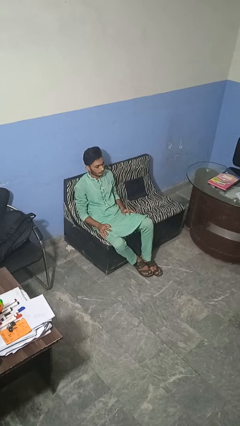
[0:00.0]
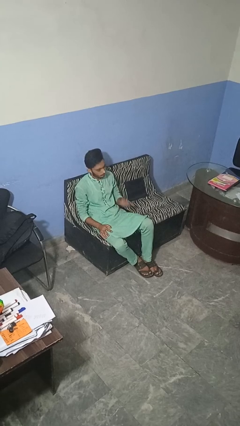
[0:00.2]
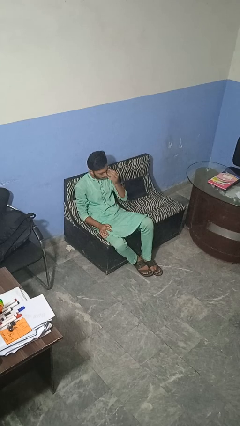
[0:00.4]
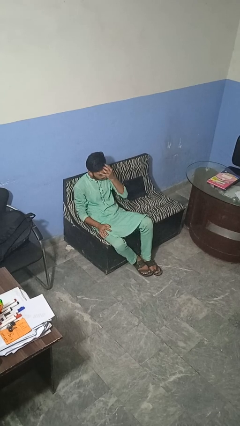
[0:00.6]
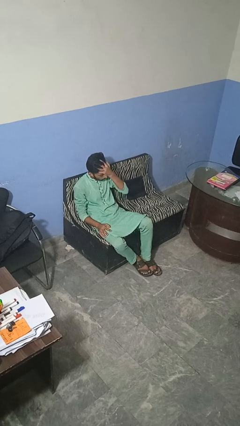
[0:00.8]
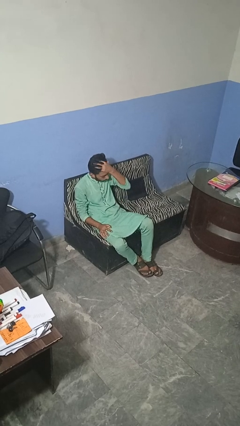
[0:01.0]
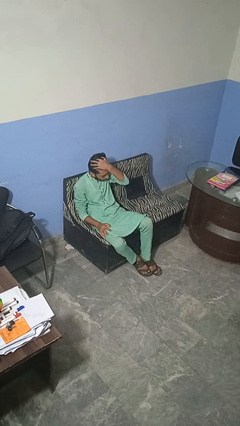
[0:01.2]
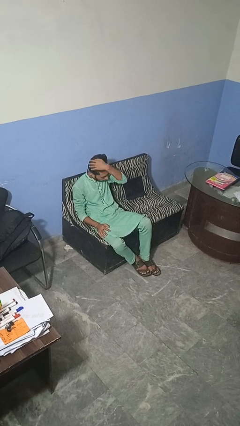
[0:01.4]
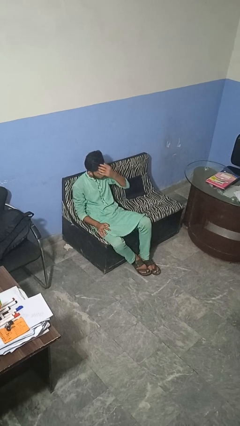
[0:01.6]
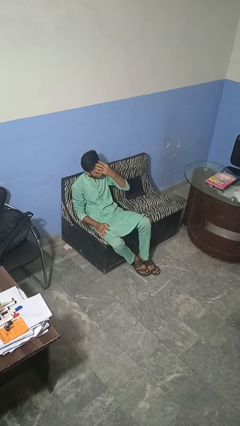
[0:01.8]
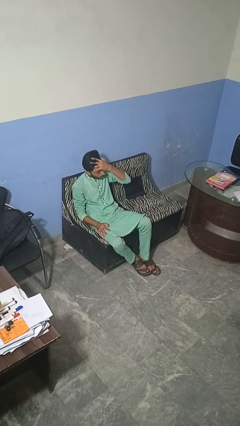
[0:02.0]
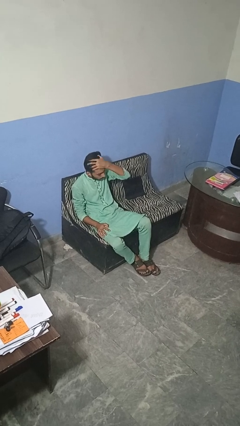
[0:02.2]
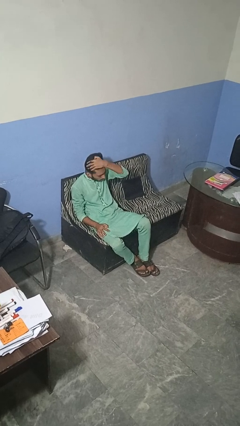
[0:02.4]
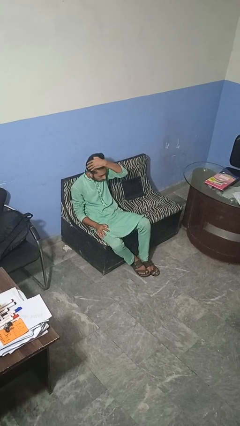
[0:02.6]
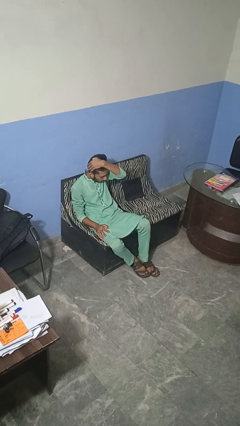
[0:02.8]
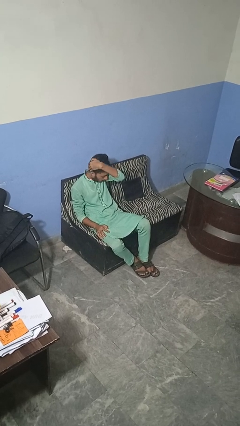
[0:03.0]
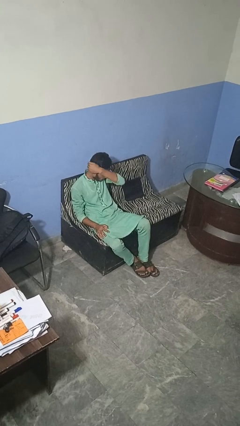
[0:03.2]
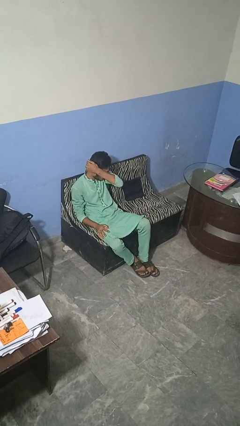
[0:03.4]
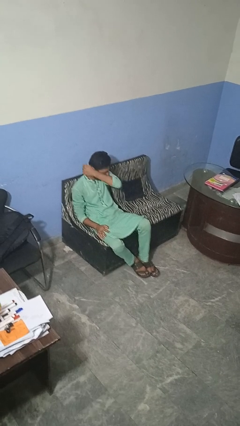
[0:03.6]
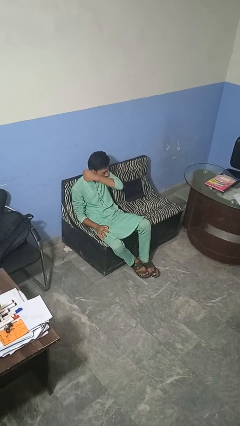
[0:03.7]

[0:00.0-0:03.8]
person strokes hair

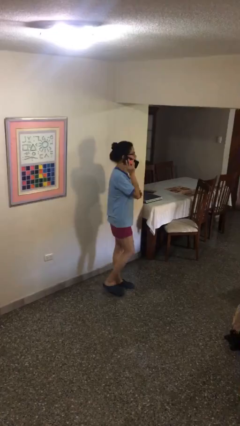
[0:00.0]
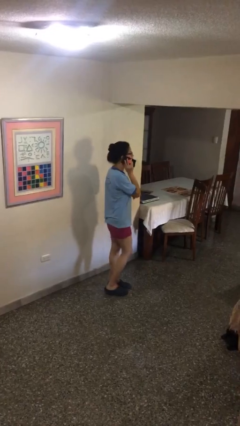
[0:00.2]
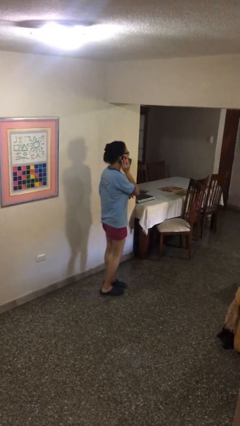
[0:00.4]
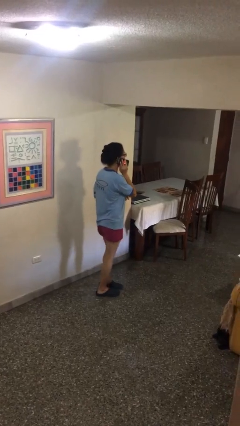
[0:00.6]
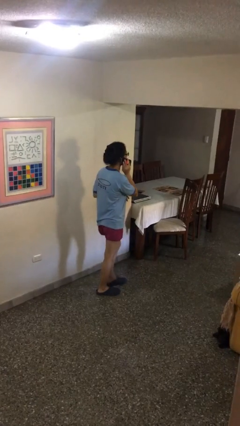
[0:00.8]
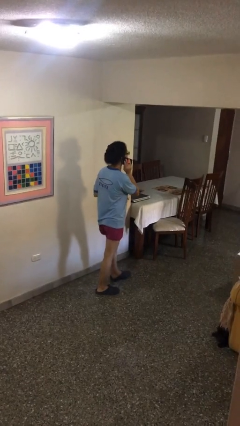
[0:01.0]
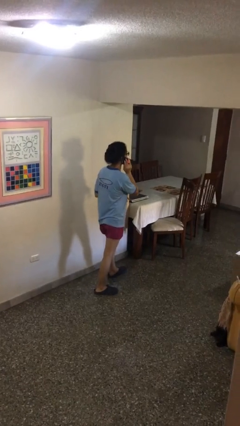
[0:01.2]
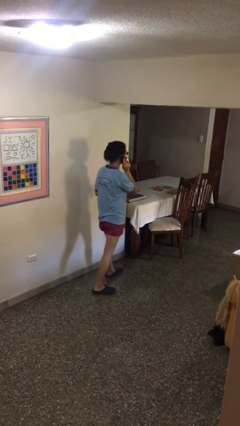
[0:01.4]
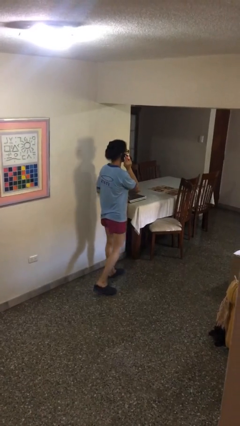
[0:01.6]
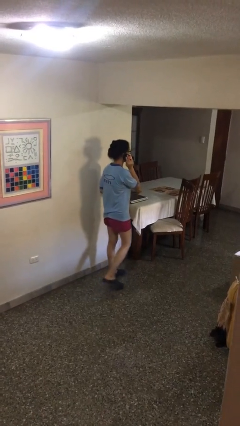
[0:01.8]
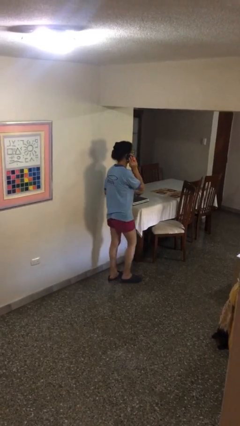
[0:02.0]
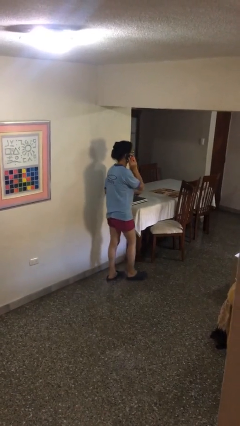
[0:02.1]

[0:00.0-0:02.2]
person talks on phone

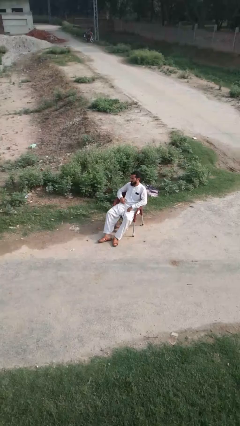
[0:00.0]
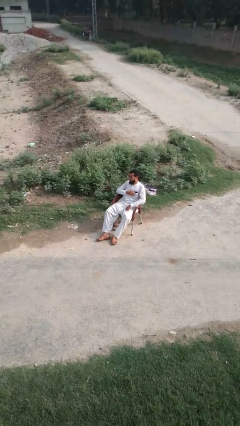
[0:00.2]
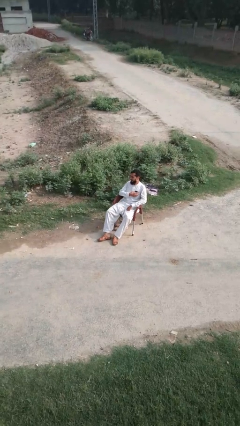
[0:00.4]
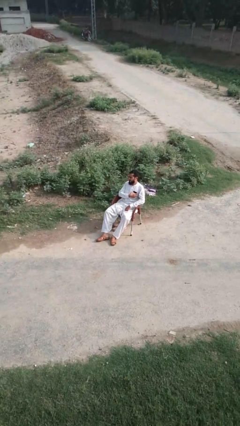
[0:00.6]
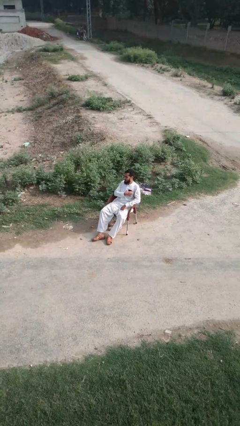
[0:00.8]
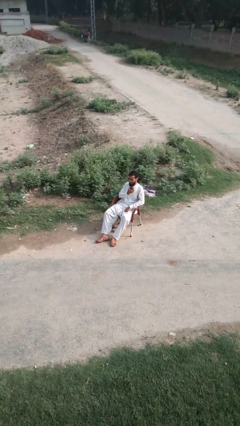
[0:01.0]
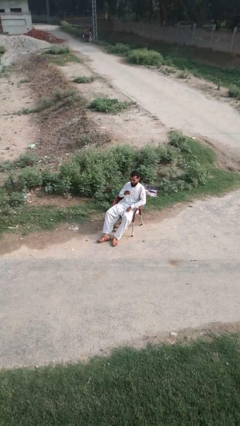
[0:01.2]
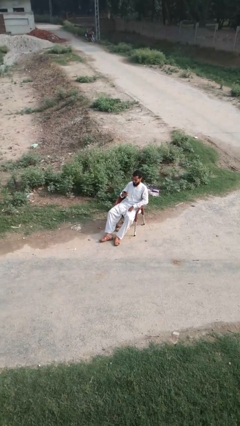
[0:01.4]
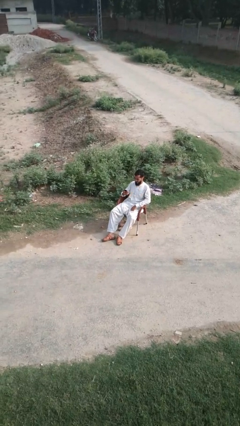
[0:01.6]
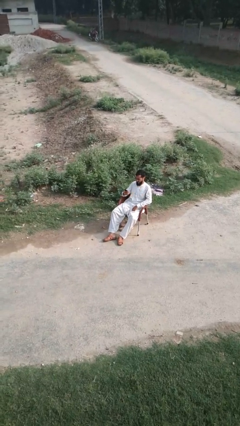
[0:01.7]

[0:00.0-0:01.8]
person takes phone from pocket

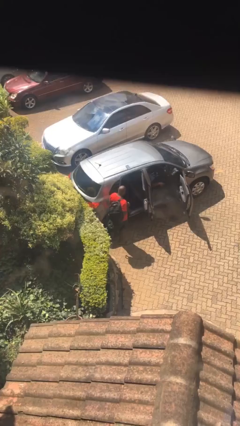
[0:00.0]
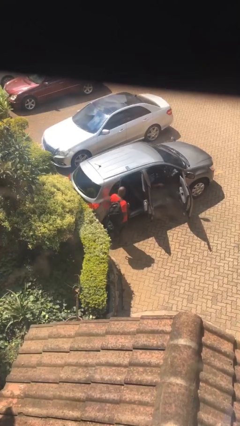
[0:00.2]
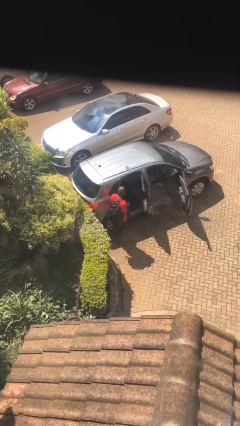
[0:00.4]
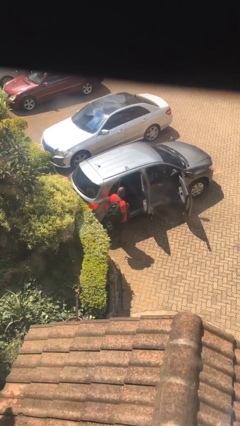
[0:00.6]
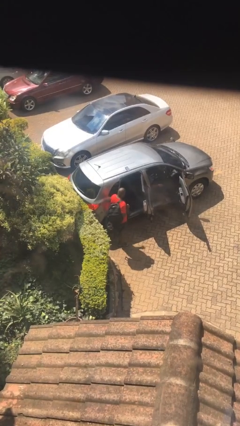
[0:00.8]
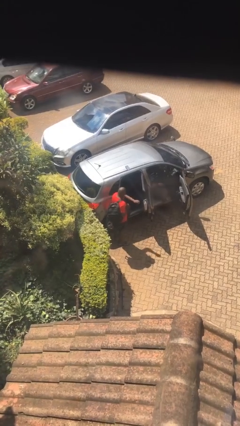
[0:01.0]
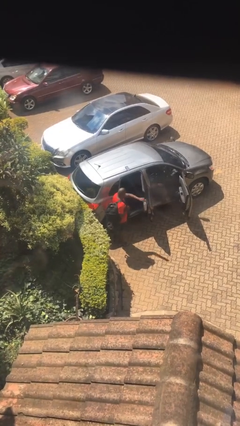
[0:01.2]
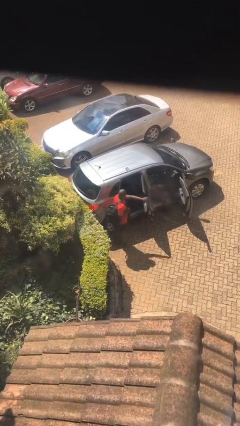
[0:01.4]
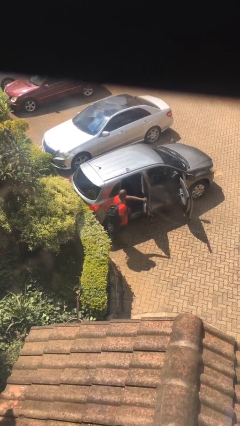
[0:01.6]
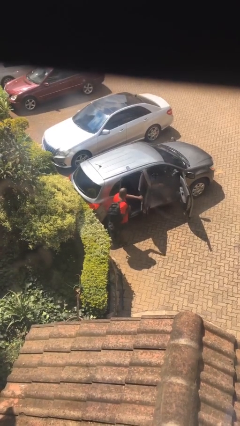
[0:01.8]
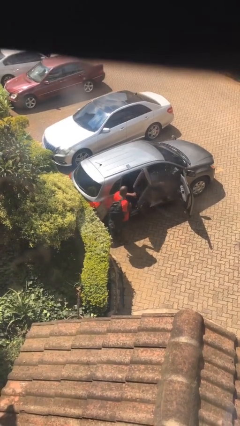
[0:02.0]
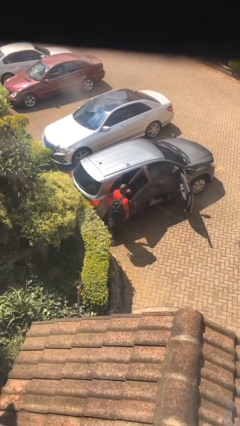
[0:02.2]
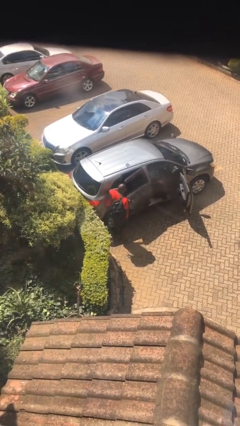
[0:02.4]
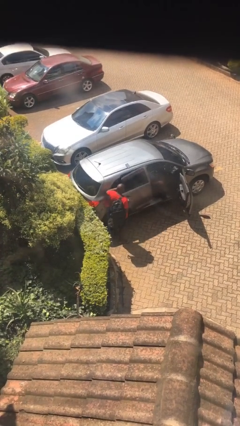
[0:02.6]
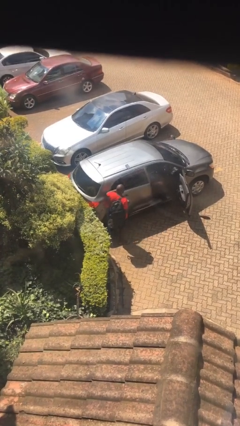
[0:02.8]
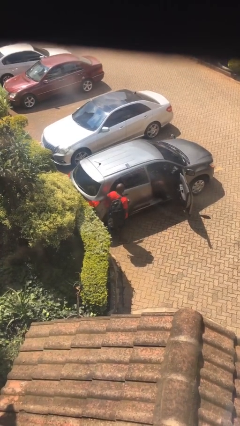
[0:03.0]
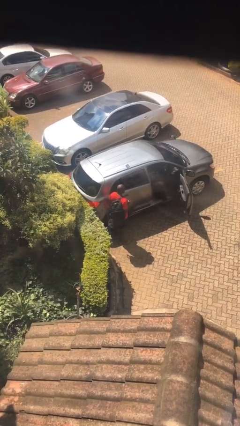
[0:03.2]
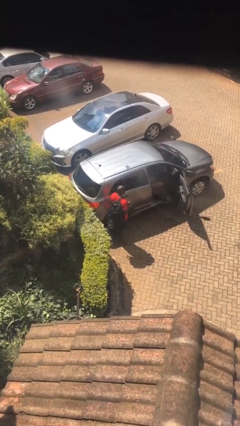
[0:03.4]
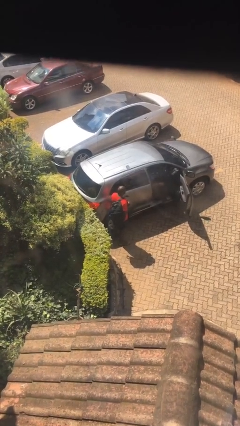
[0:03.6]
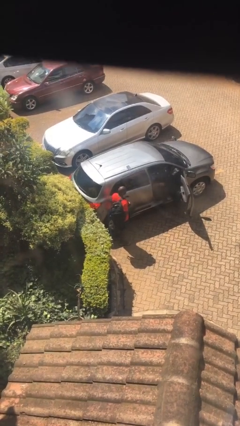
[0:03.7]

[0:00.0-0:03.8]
person closes car door

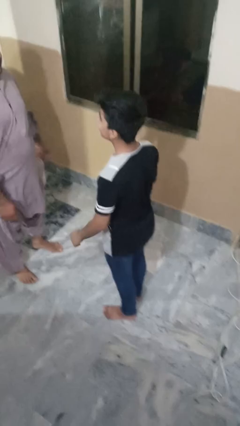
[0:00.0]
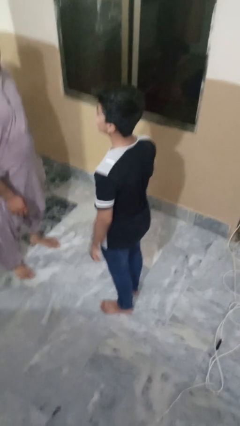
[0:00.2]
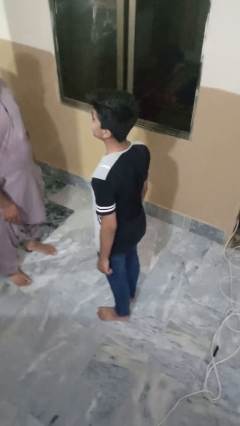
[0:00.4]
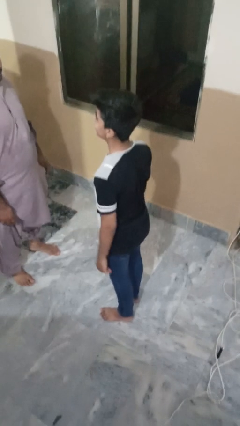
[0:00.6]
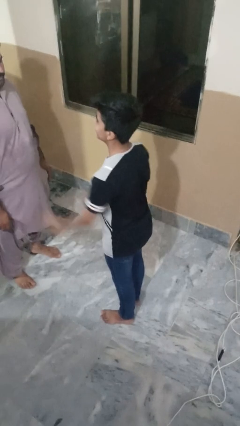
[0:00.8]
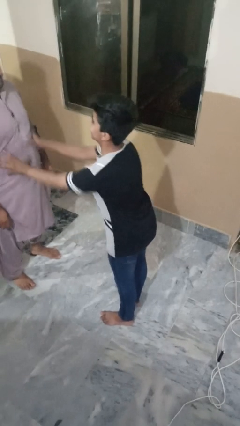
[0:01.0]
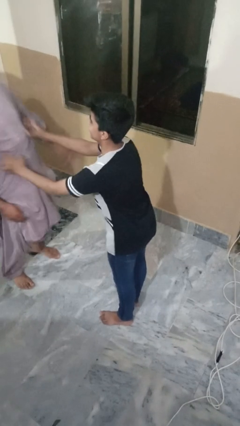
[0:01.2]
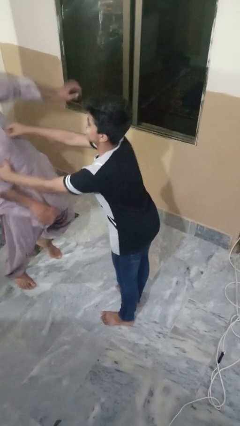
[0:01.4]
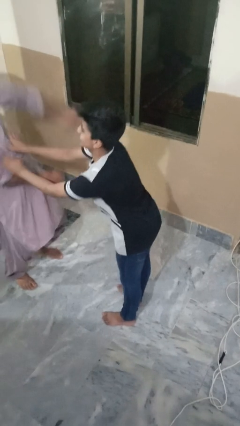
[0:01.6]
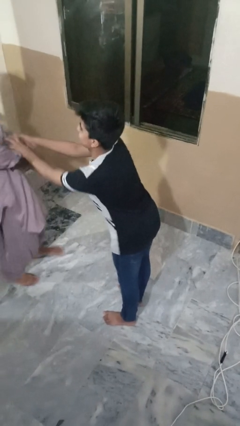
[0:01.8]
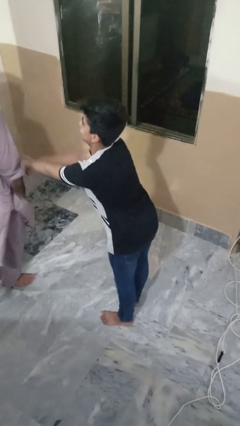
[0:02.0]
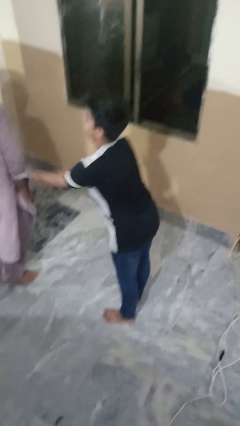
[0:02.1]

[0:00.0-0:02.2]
person tickles person

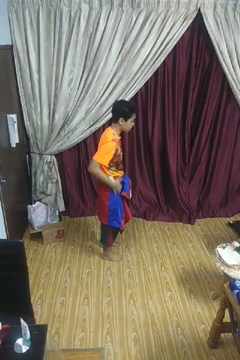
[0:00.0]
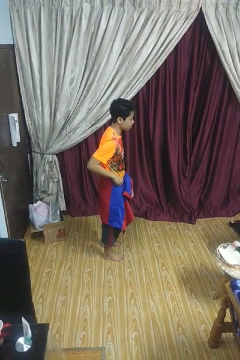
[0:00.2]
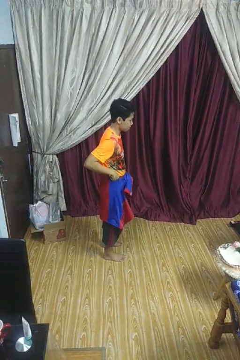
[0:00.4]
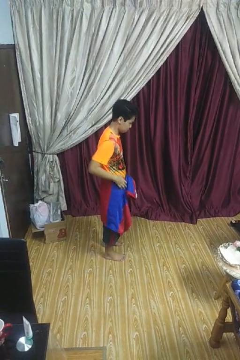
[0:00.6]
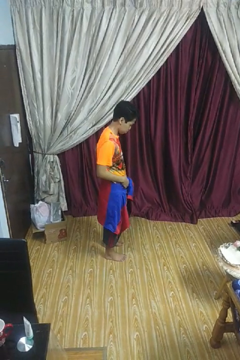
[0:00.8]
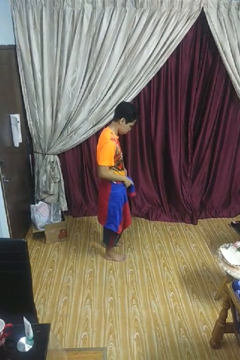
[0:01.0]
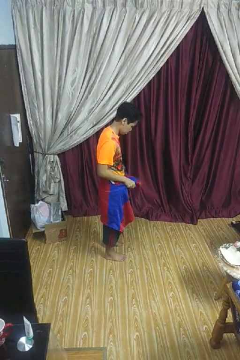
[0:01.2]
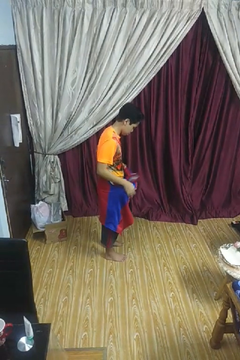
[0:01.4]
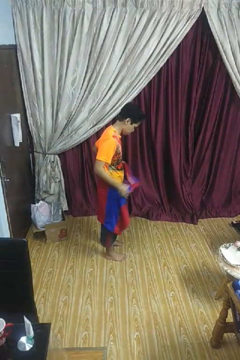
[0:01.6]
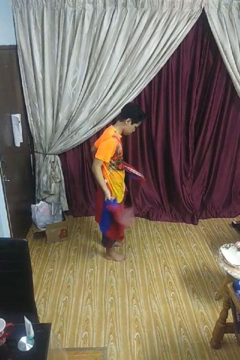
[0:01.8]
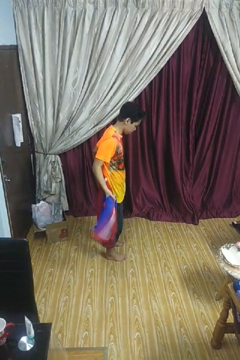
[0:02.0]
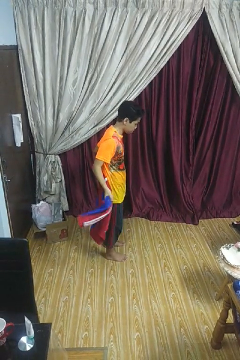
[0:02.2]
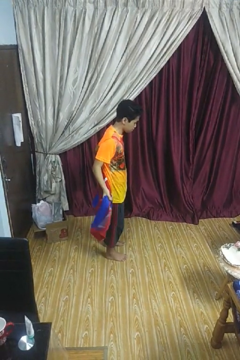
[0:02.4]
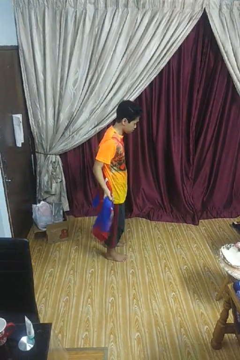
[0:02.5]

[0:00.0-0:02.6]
person unties jacket around waist

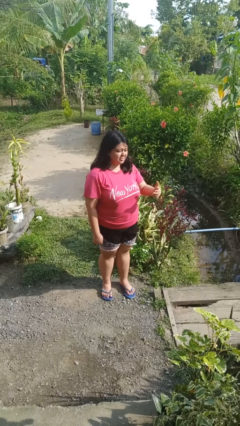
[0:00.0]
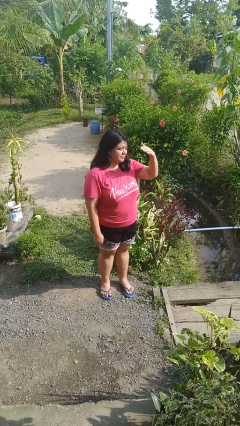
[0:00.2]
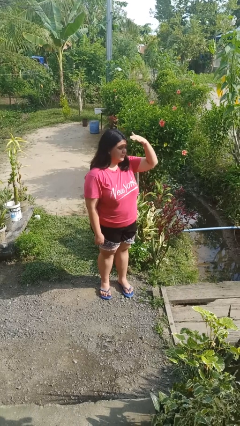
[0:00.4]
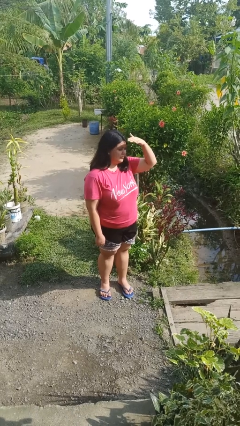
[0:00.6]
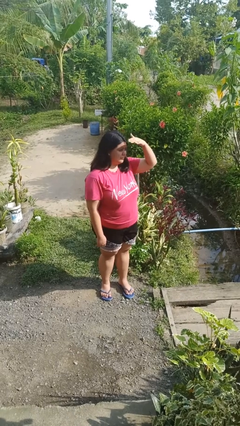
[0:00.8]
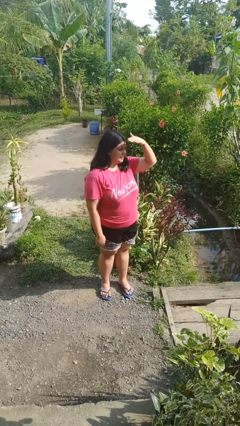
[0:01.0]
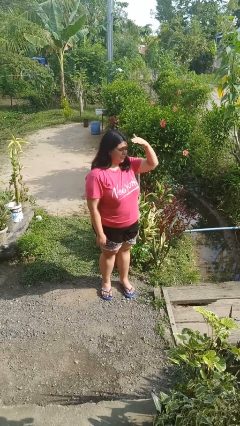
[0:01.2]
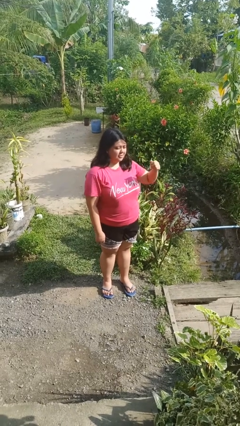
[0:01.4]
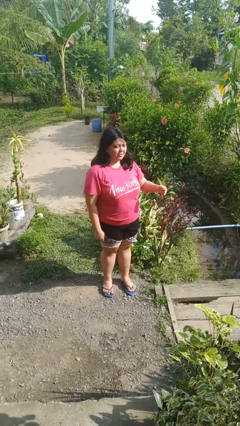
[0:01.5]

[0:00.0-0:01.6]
person shades eyes
